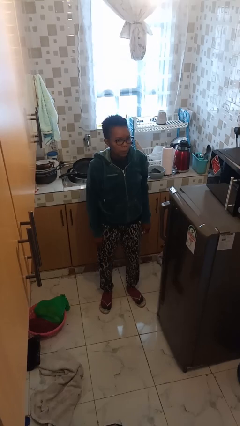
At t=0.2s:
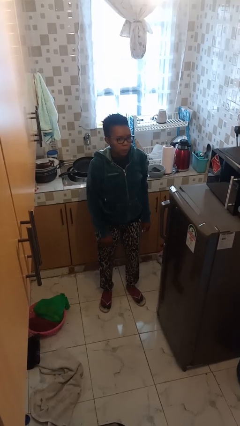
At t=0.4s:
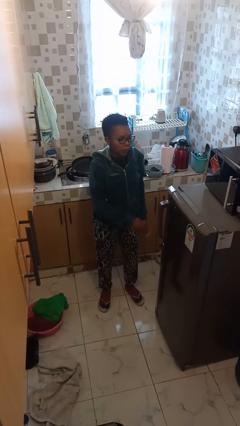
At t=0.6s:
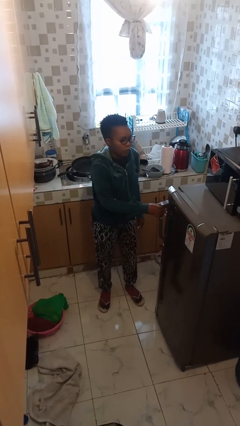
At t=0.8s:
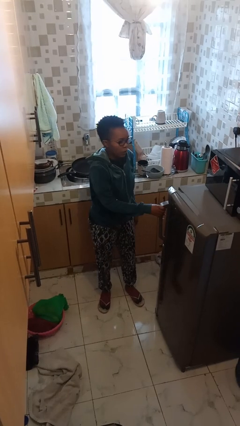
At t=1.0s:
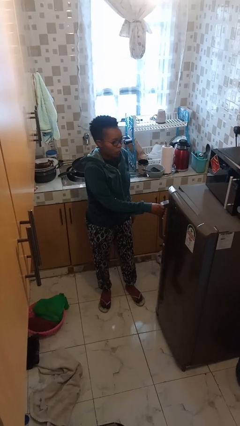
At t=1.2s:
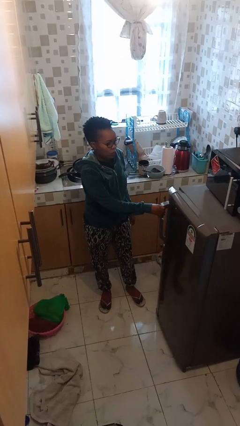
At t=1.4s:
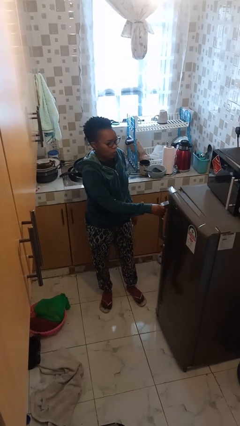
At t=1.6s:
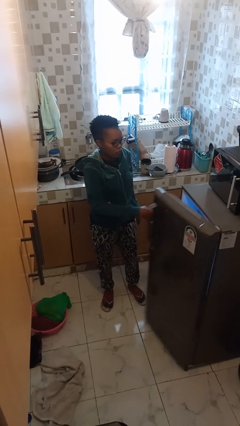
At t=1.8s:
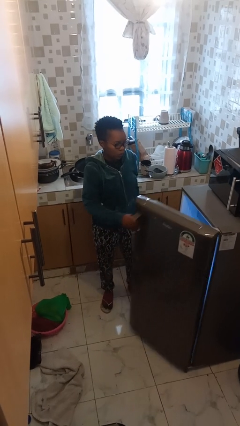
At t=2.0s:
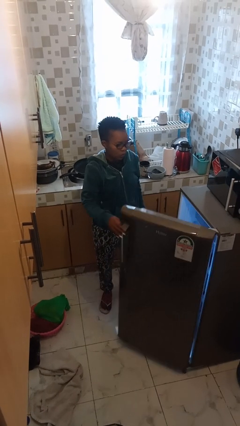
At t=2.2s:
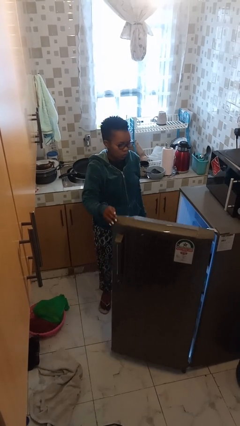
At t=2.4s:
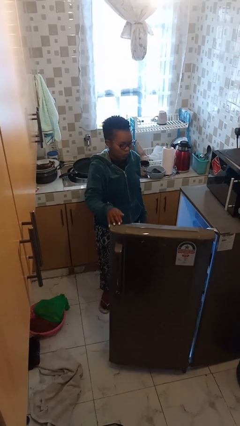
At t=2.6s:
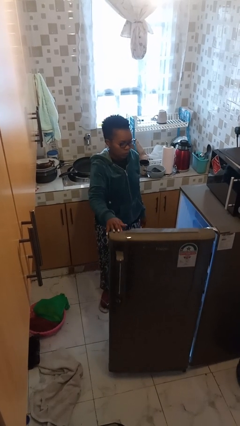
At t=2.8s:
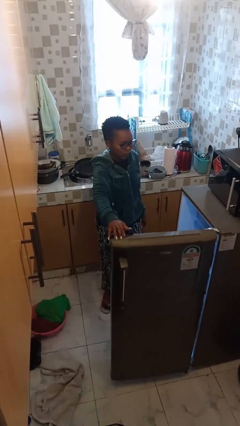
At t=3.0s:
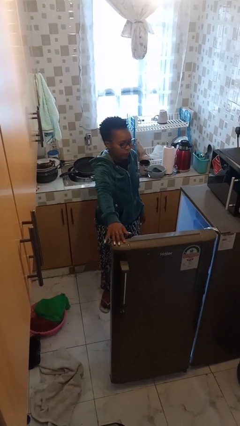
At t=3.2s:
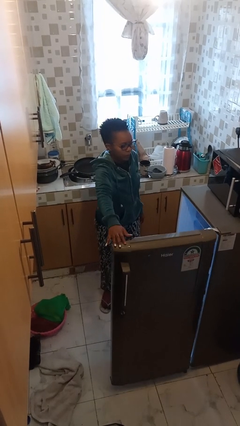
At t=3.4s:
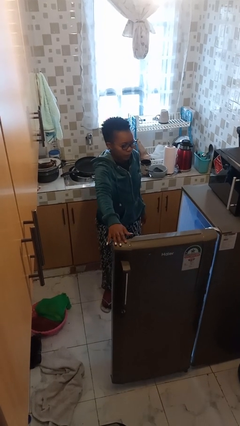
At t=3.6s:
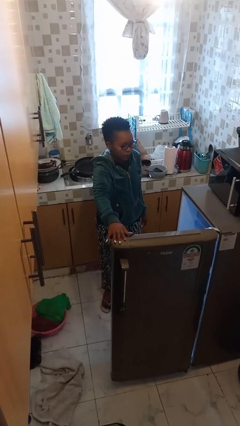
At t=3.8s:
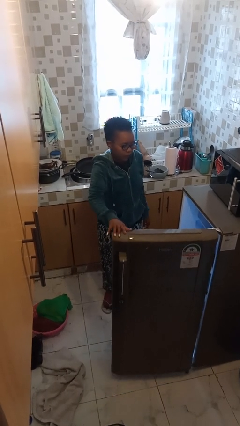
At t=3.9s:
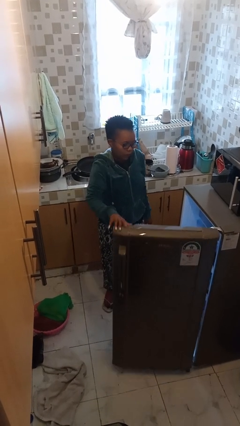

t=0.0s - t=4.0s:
person opens refrigerator

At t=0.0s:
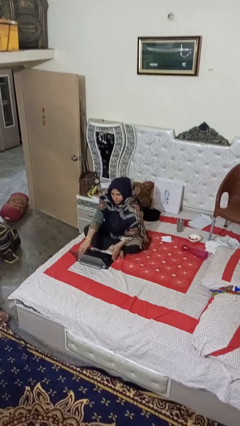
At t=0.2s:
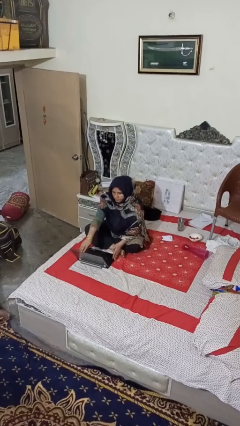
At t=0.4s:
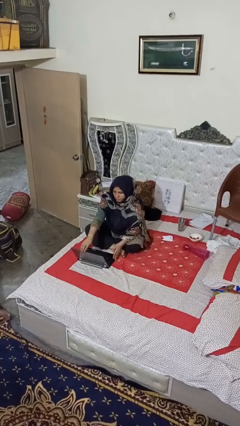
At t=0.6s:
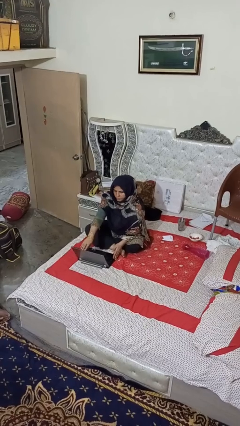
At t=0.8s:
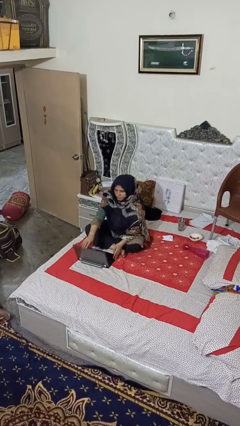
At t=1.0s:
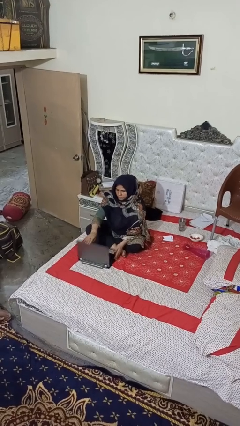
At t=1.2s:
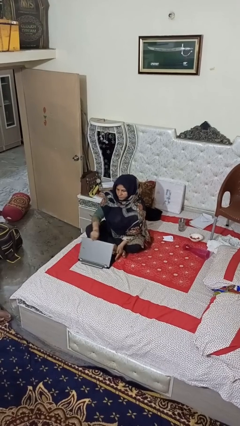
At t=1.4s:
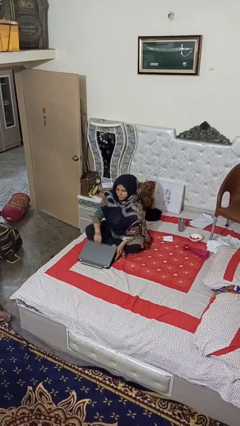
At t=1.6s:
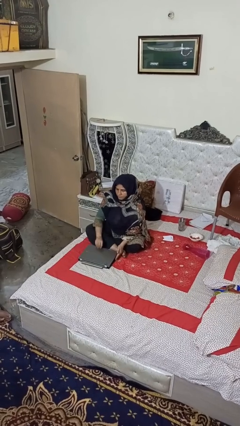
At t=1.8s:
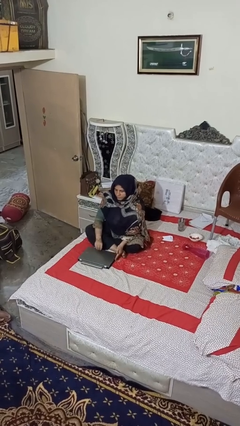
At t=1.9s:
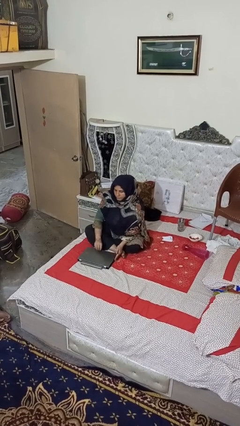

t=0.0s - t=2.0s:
person closes laptop

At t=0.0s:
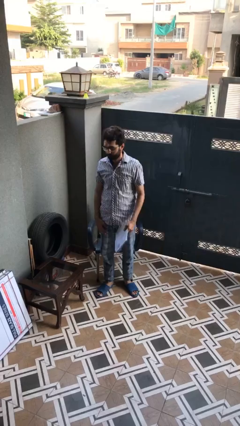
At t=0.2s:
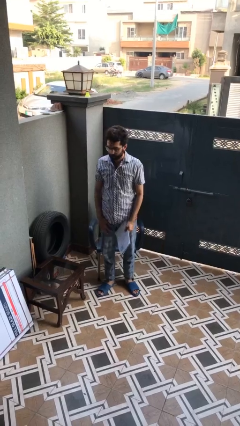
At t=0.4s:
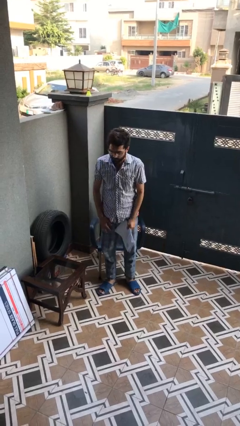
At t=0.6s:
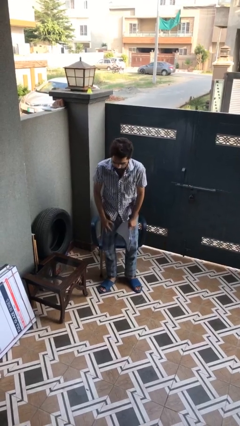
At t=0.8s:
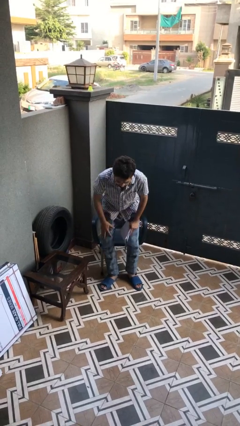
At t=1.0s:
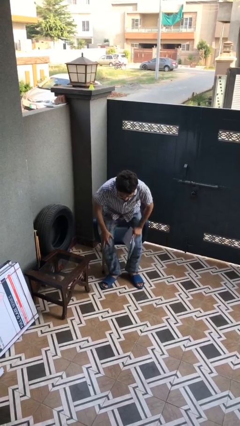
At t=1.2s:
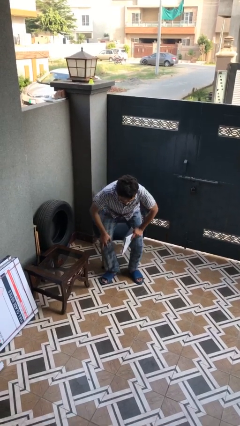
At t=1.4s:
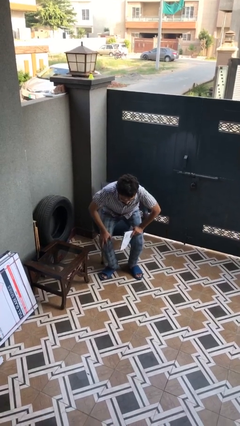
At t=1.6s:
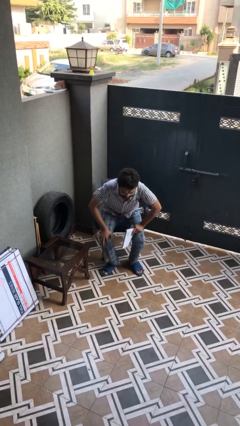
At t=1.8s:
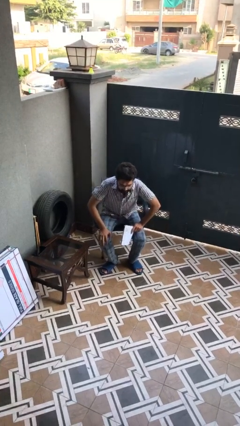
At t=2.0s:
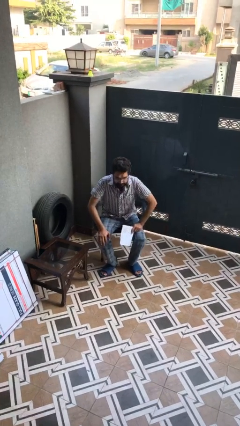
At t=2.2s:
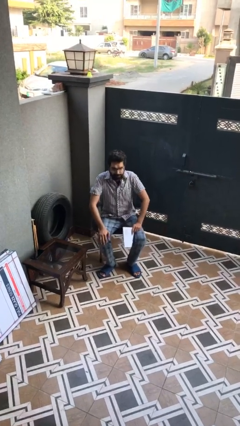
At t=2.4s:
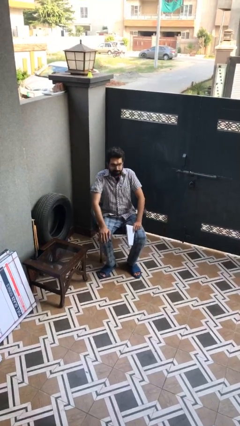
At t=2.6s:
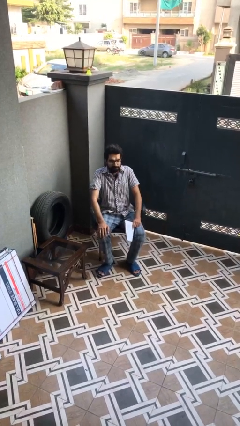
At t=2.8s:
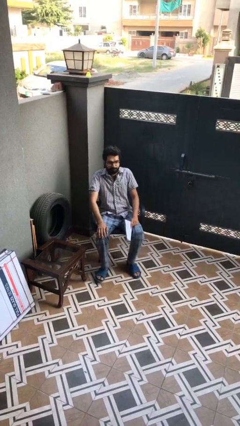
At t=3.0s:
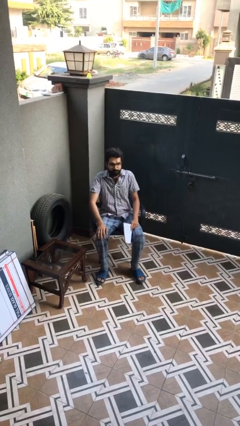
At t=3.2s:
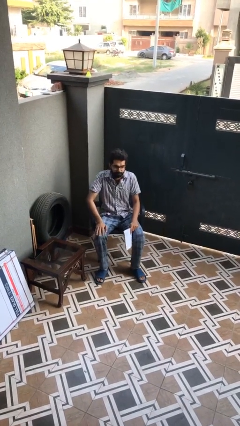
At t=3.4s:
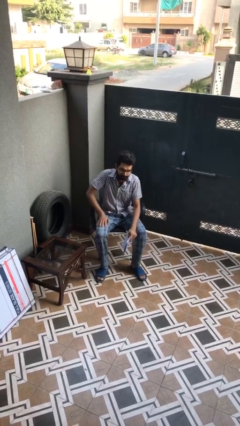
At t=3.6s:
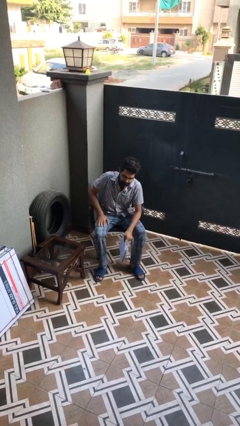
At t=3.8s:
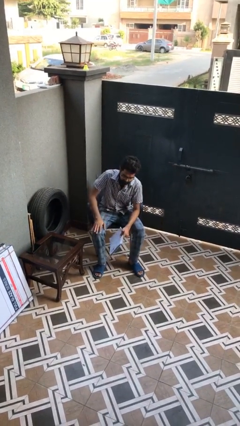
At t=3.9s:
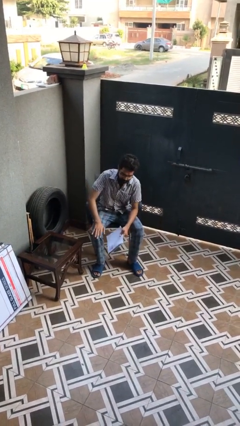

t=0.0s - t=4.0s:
person sits down

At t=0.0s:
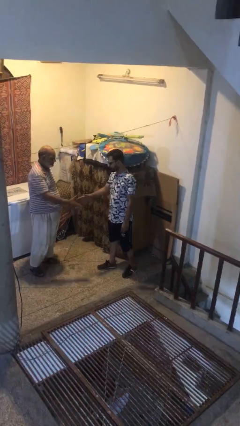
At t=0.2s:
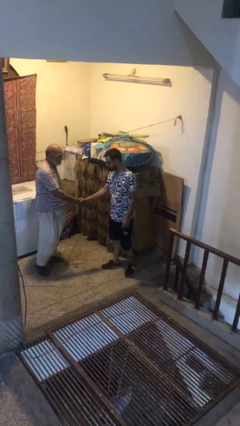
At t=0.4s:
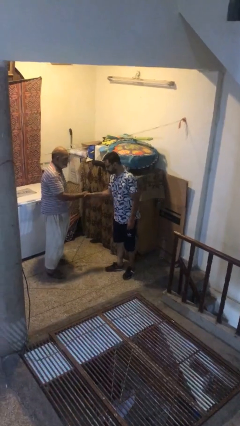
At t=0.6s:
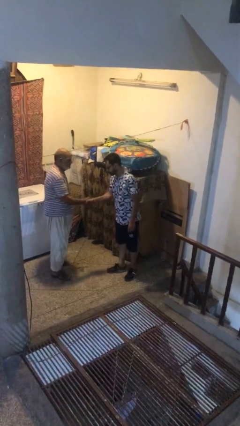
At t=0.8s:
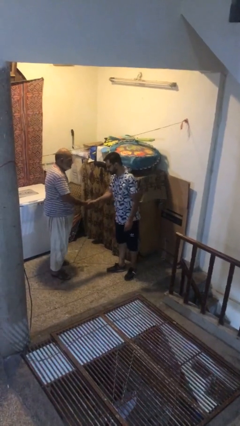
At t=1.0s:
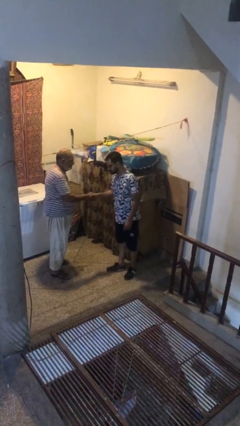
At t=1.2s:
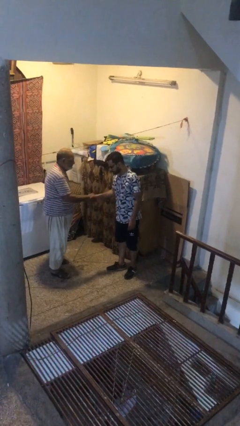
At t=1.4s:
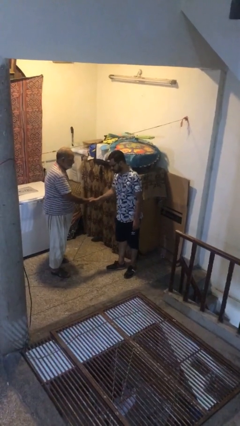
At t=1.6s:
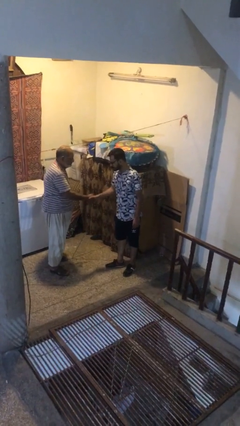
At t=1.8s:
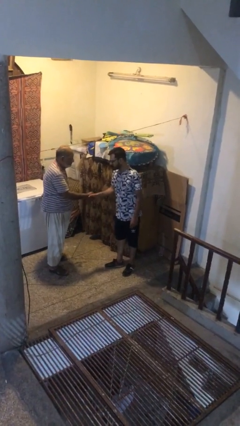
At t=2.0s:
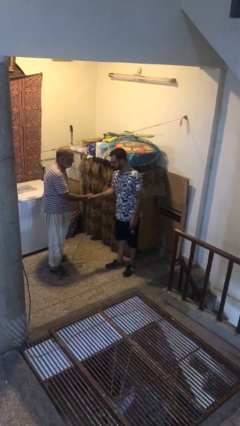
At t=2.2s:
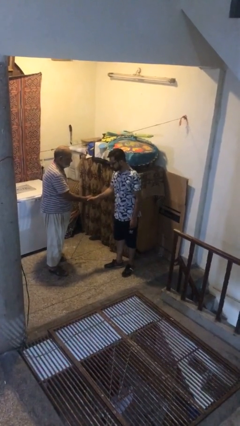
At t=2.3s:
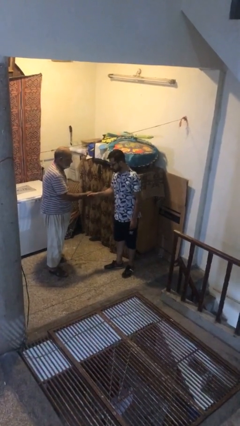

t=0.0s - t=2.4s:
person shakes hand

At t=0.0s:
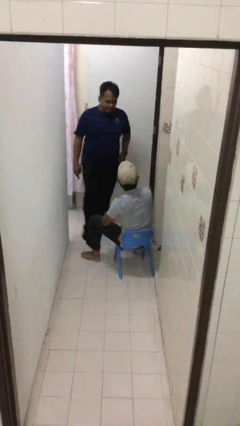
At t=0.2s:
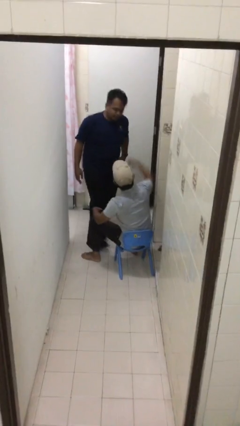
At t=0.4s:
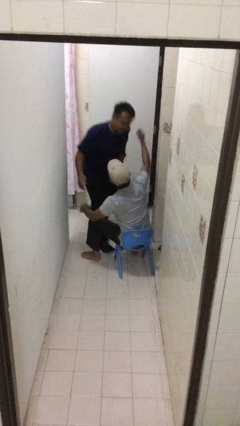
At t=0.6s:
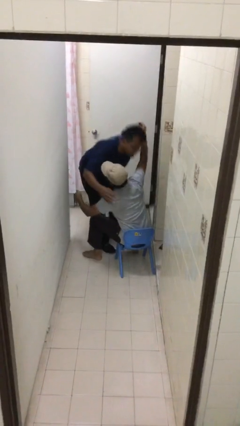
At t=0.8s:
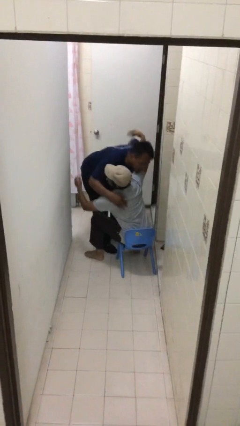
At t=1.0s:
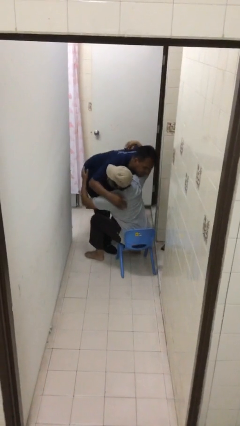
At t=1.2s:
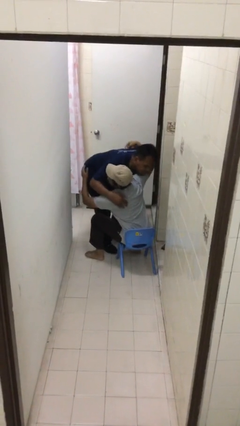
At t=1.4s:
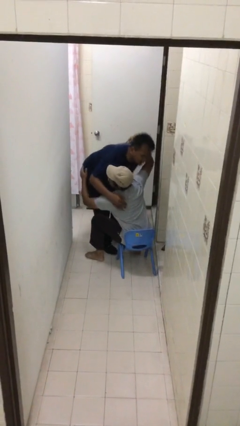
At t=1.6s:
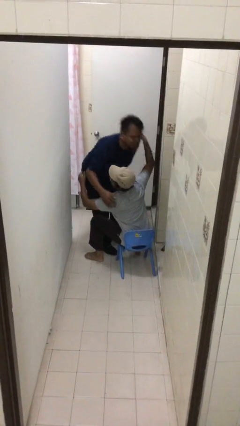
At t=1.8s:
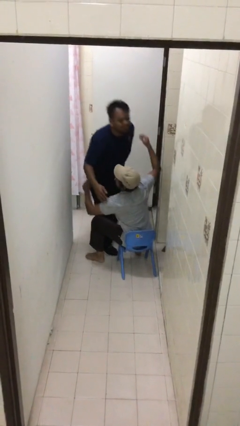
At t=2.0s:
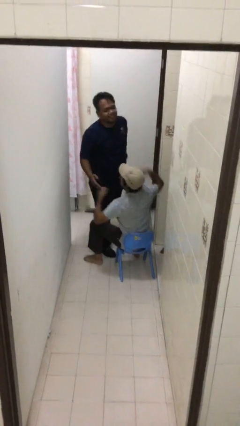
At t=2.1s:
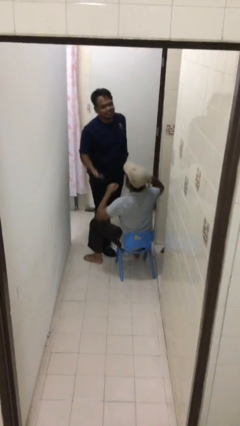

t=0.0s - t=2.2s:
person embraces person

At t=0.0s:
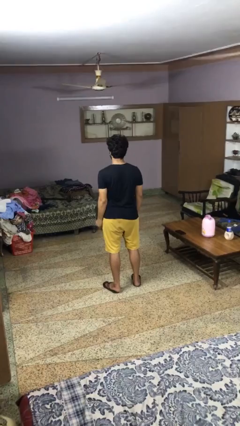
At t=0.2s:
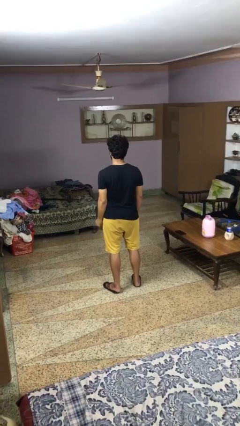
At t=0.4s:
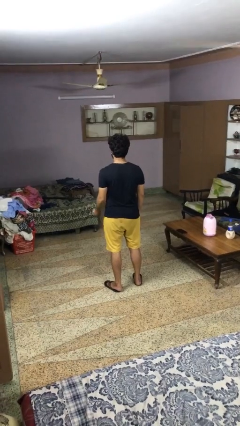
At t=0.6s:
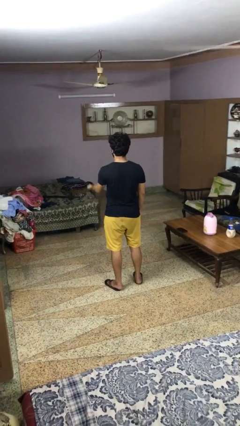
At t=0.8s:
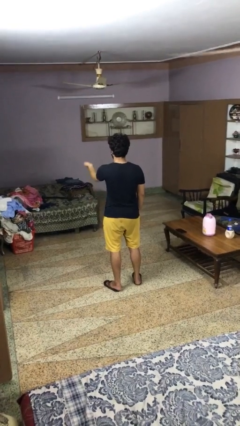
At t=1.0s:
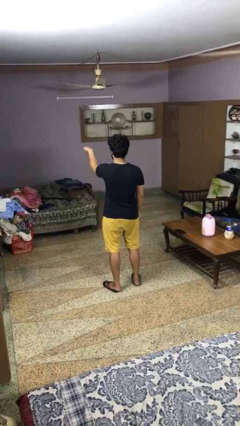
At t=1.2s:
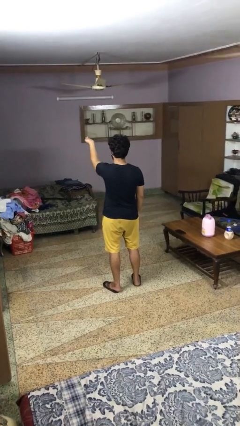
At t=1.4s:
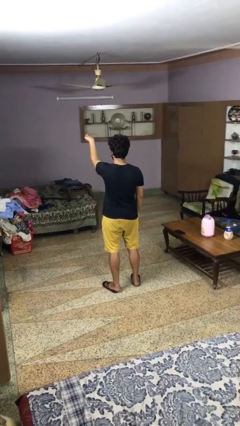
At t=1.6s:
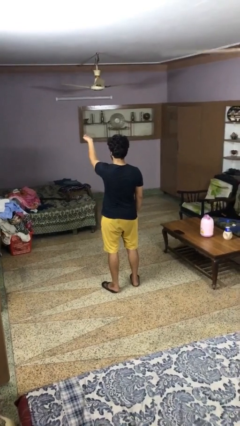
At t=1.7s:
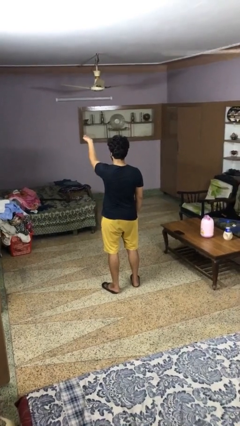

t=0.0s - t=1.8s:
person gestures swipe up

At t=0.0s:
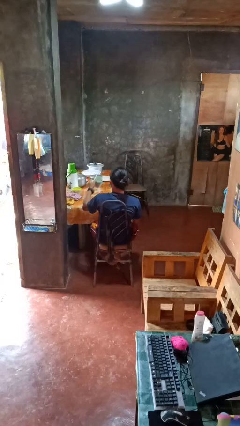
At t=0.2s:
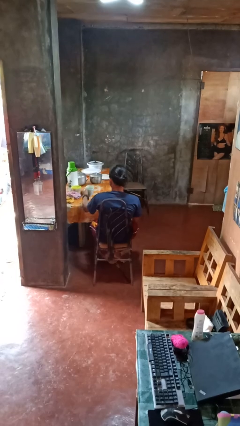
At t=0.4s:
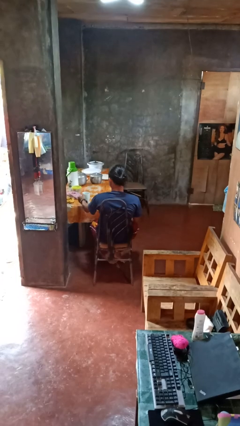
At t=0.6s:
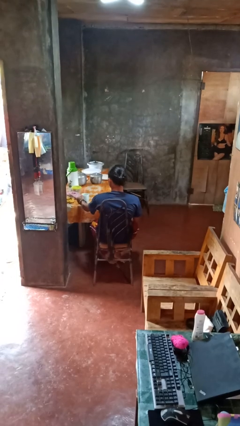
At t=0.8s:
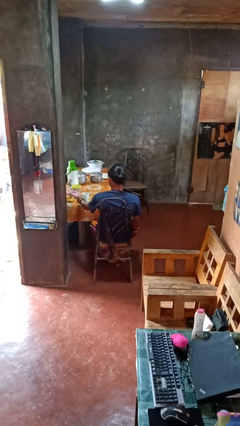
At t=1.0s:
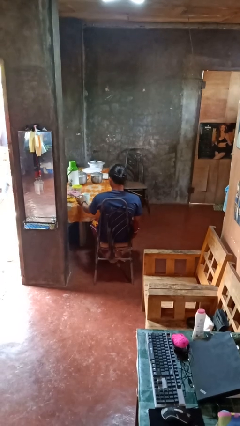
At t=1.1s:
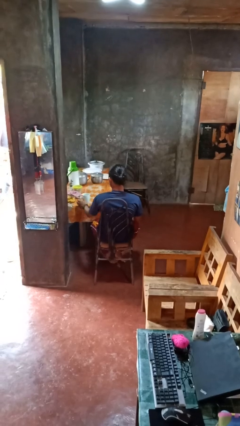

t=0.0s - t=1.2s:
person puts down object on table
